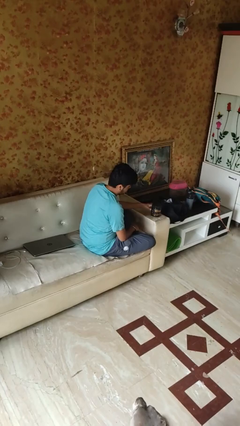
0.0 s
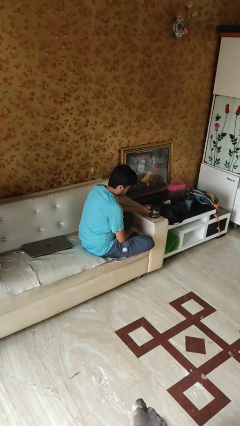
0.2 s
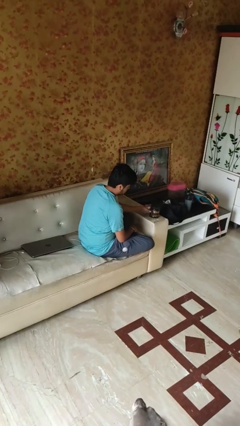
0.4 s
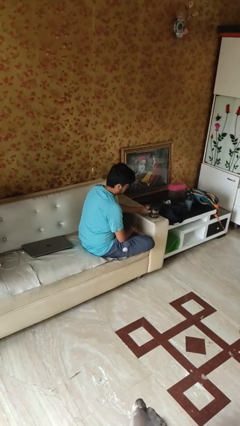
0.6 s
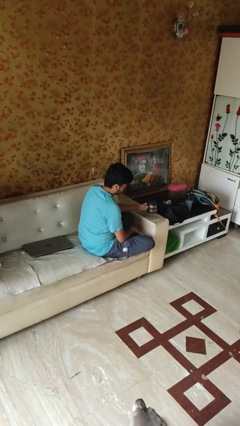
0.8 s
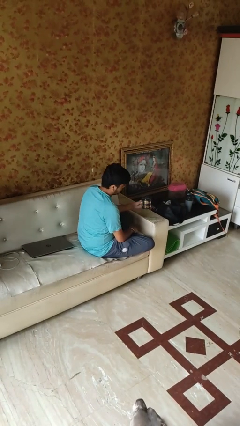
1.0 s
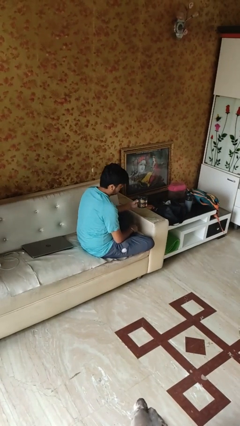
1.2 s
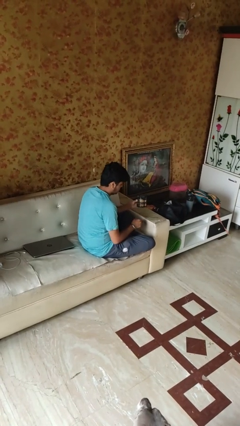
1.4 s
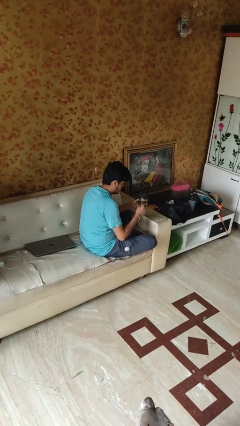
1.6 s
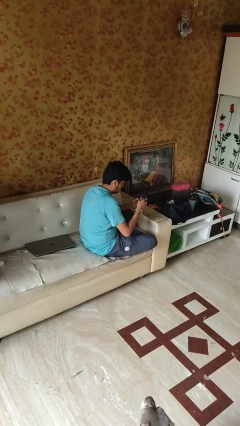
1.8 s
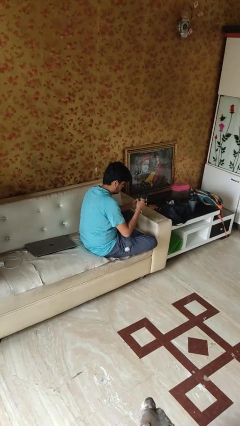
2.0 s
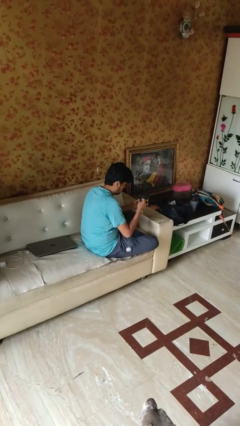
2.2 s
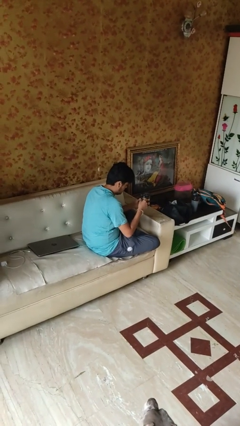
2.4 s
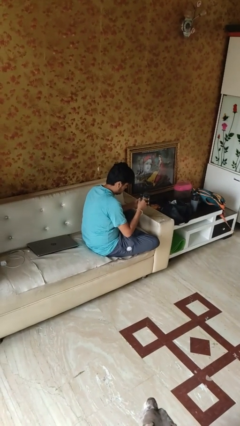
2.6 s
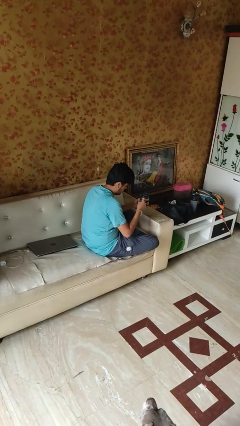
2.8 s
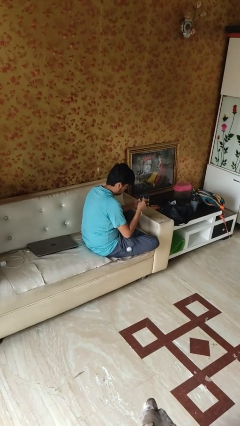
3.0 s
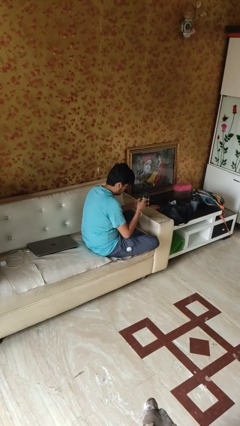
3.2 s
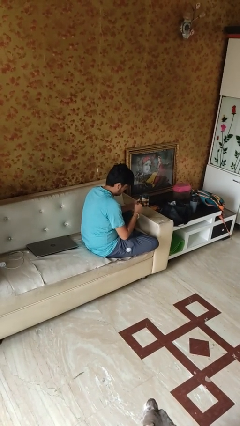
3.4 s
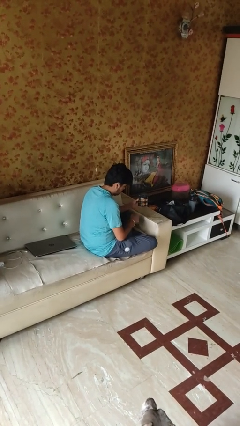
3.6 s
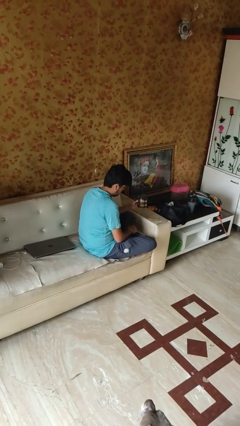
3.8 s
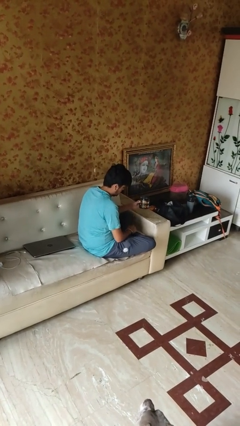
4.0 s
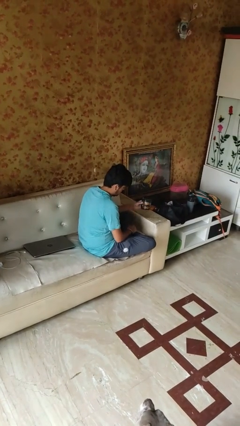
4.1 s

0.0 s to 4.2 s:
person taps object with finger

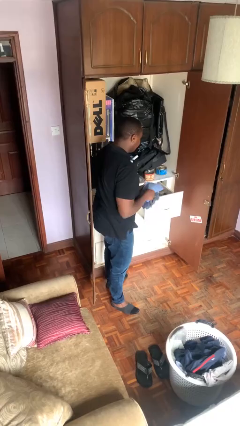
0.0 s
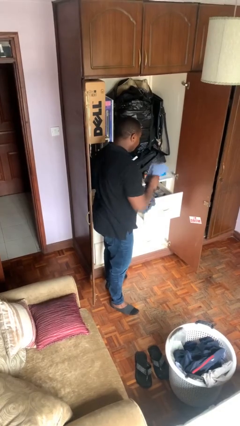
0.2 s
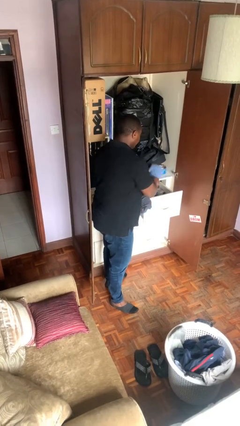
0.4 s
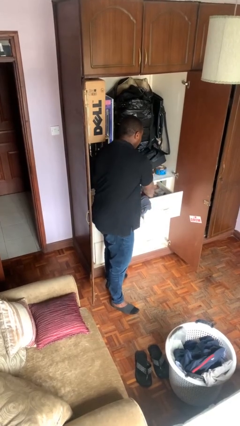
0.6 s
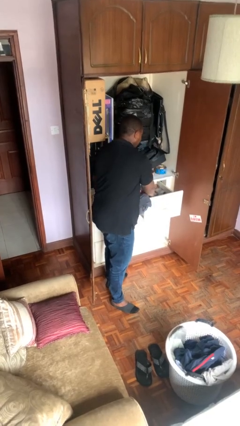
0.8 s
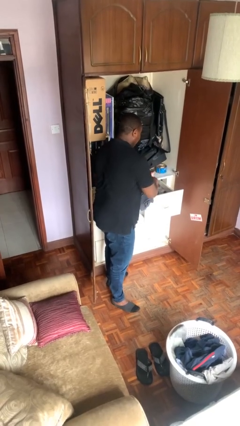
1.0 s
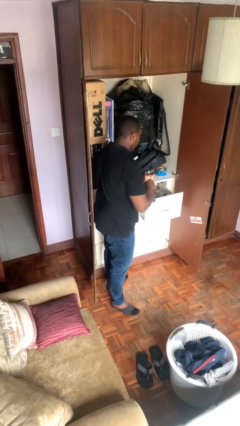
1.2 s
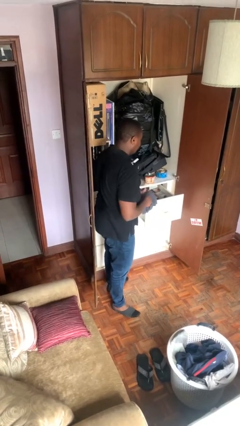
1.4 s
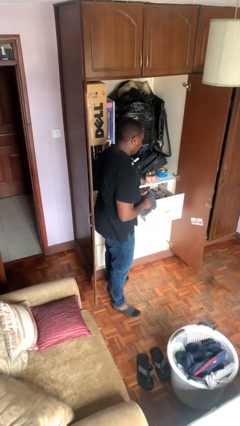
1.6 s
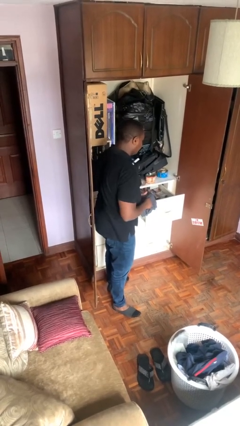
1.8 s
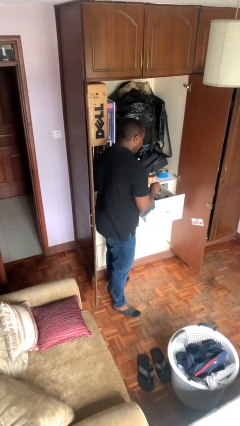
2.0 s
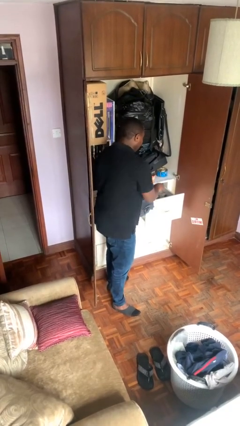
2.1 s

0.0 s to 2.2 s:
person puts clothes into dresser

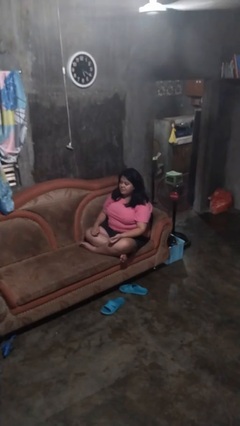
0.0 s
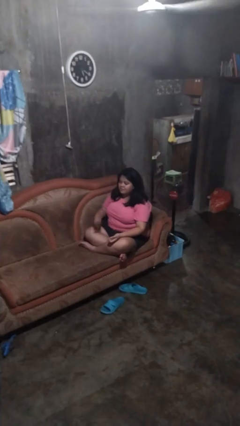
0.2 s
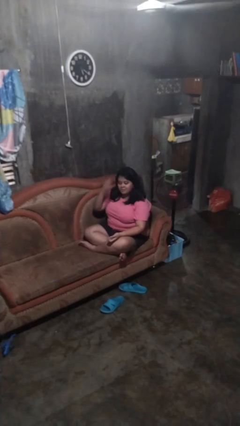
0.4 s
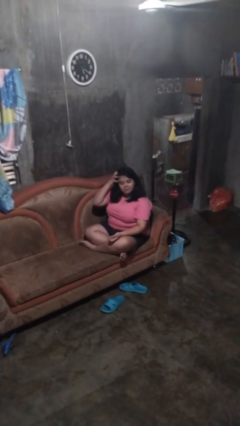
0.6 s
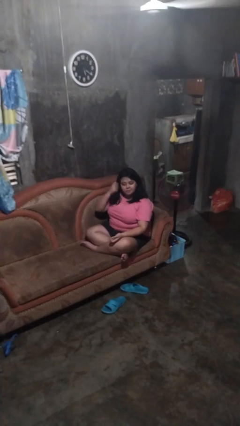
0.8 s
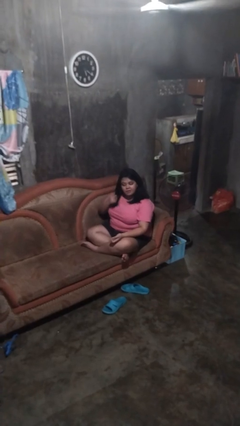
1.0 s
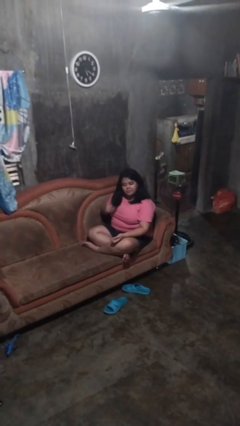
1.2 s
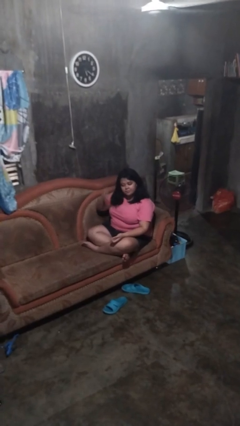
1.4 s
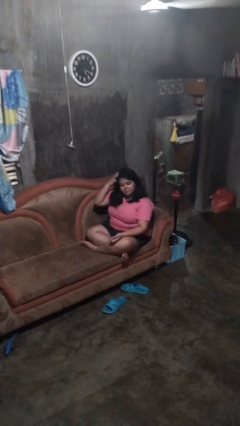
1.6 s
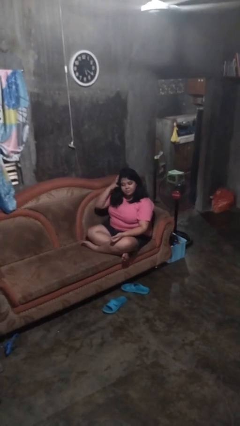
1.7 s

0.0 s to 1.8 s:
person strokes hair

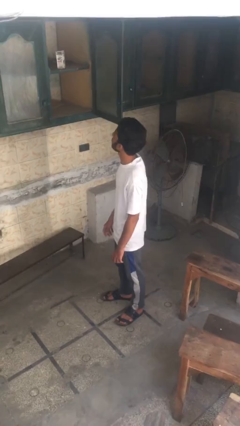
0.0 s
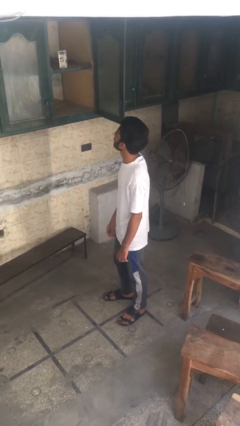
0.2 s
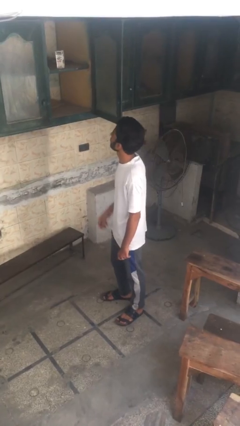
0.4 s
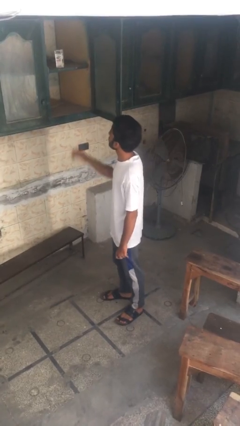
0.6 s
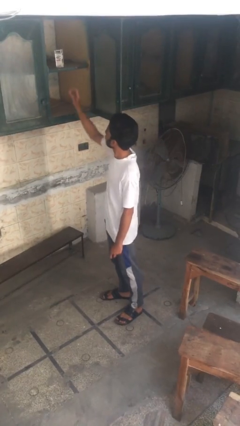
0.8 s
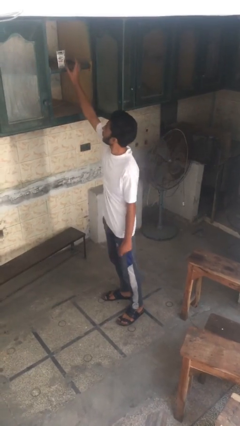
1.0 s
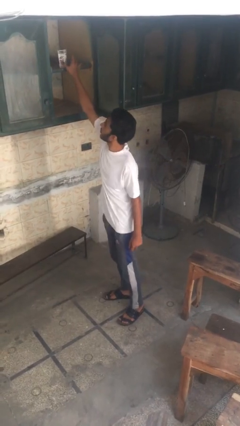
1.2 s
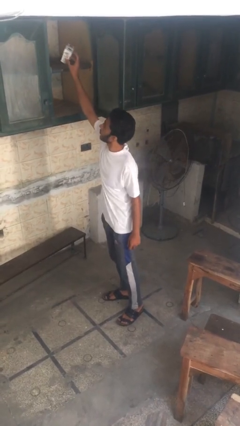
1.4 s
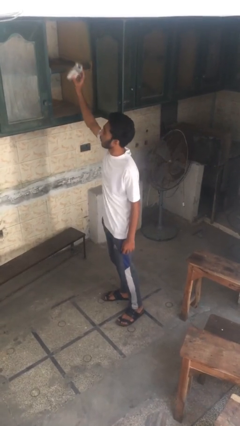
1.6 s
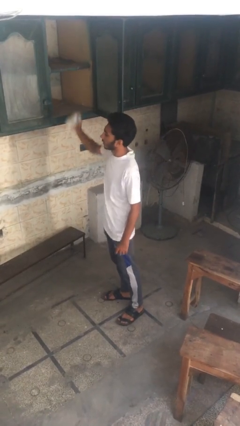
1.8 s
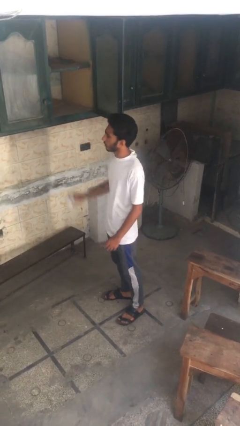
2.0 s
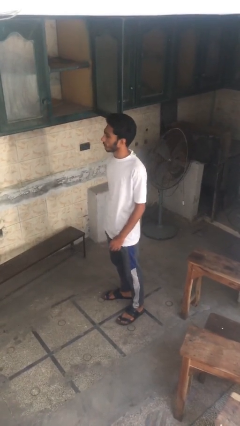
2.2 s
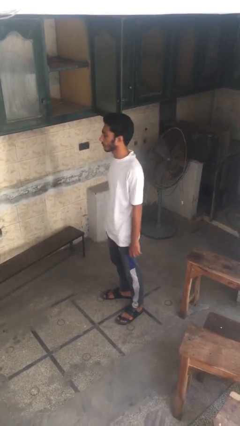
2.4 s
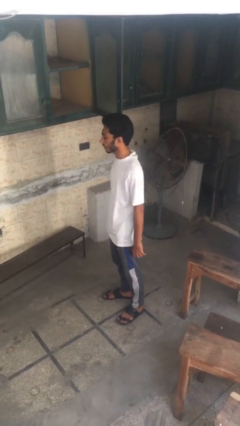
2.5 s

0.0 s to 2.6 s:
person takes object from cabinet

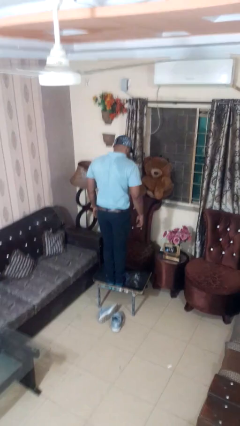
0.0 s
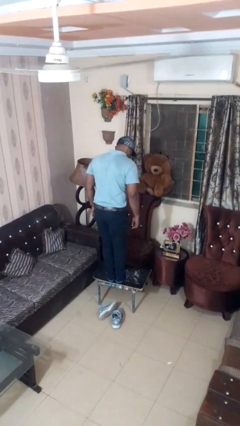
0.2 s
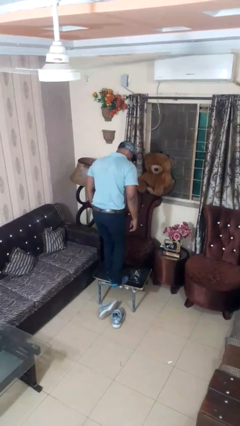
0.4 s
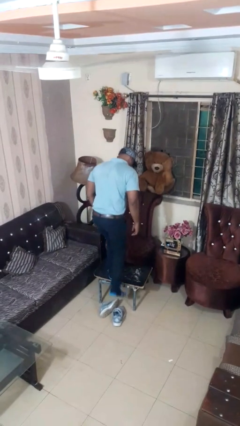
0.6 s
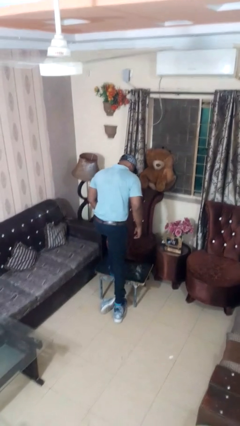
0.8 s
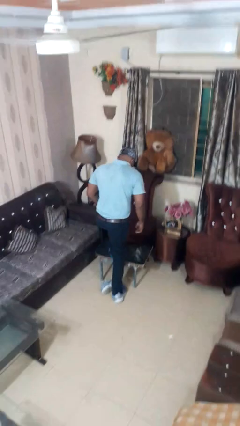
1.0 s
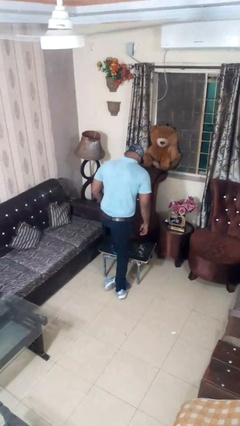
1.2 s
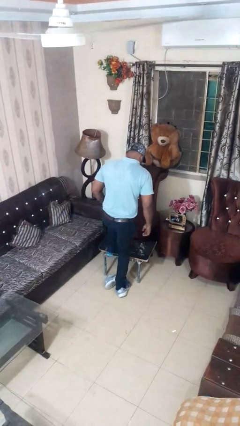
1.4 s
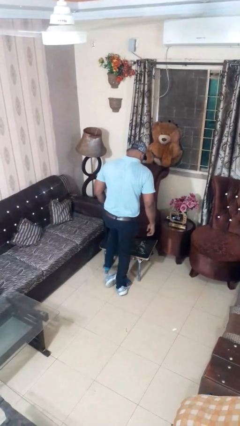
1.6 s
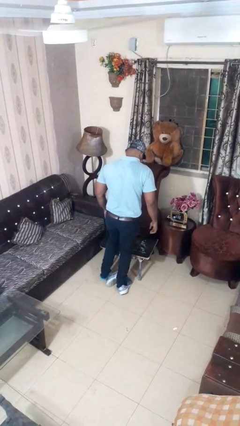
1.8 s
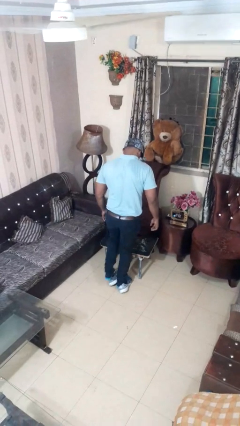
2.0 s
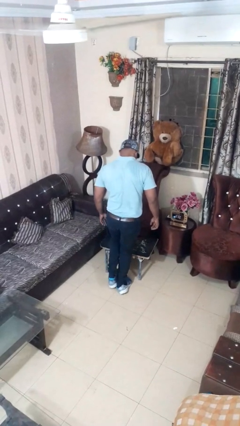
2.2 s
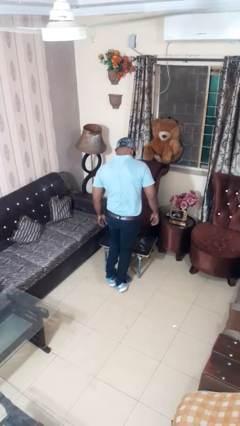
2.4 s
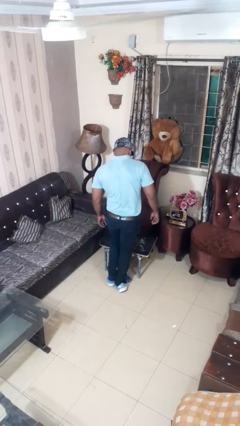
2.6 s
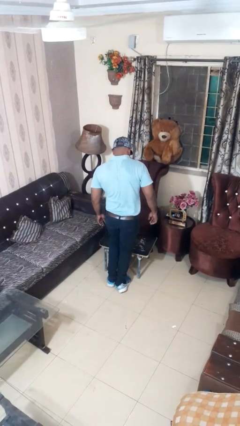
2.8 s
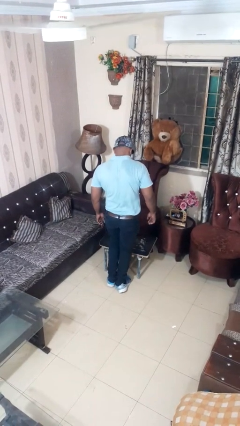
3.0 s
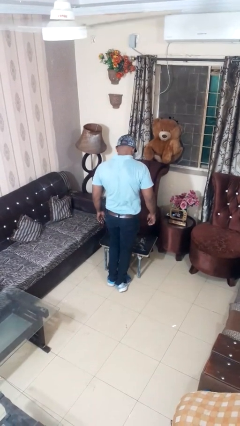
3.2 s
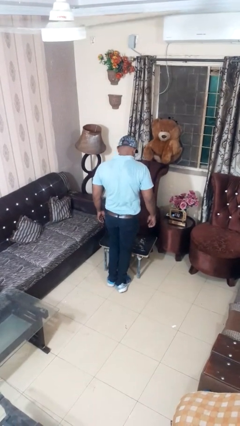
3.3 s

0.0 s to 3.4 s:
person climbs off table

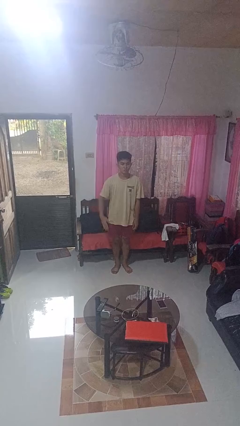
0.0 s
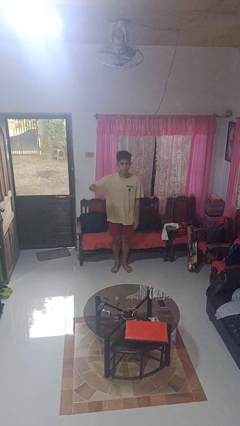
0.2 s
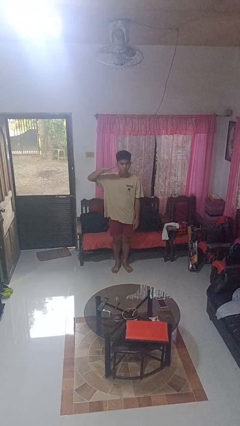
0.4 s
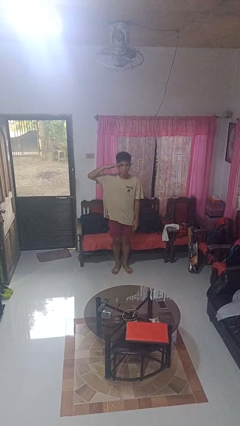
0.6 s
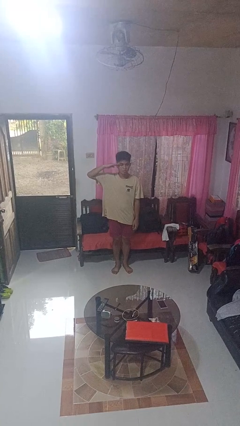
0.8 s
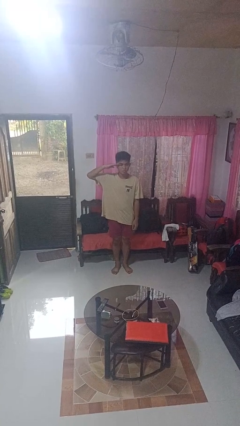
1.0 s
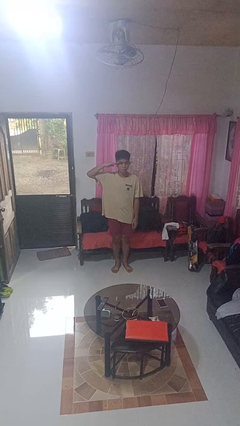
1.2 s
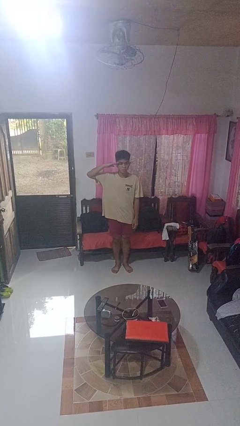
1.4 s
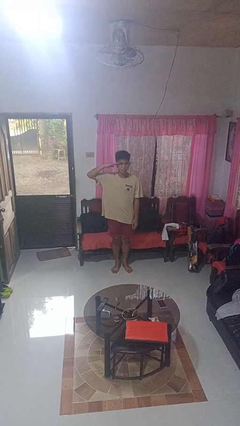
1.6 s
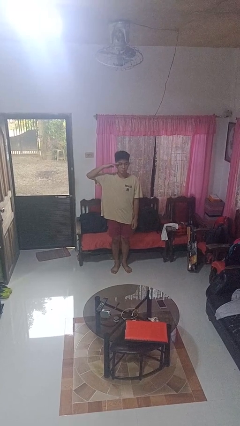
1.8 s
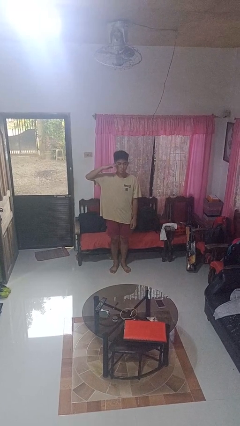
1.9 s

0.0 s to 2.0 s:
person salutes

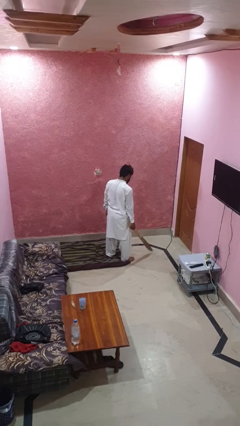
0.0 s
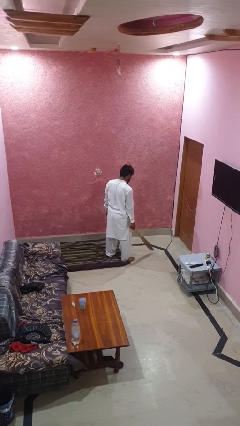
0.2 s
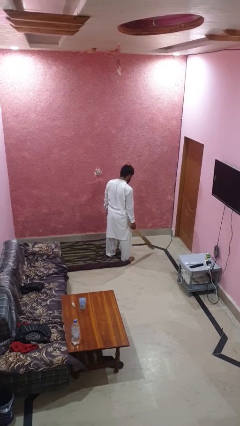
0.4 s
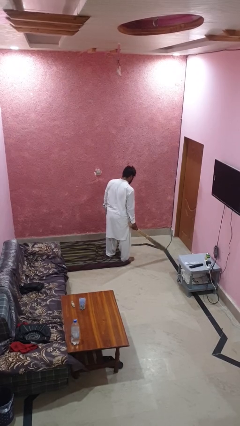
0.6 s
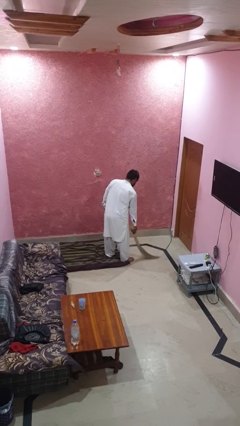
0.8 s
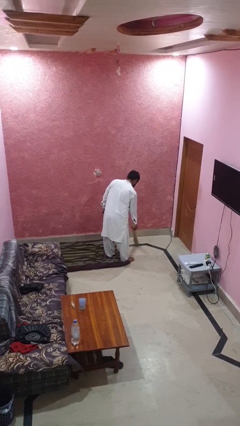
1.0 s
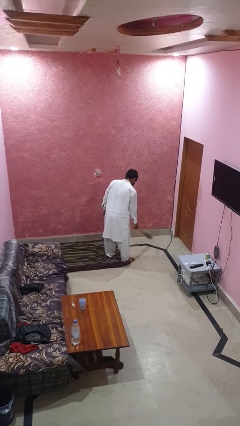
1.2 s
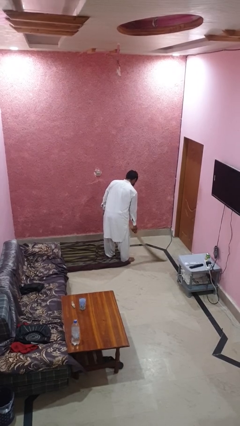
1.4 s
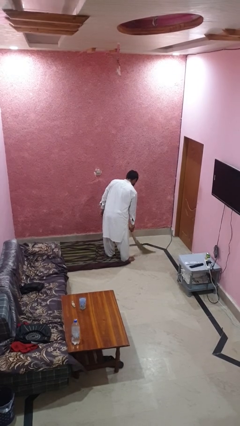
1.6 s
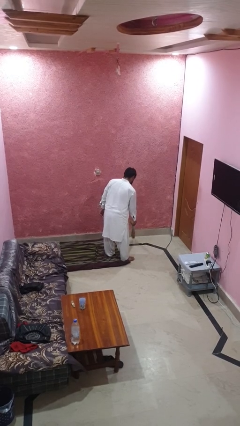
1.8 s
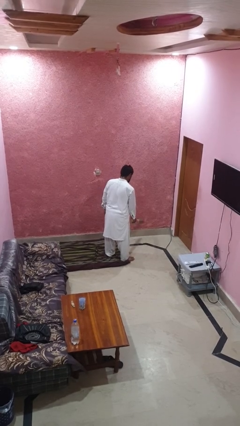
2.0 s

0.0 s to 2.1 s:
person sweeps floor
